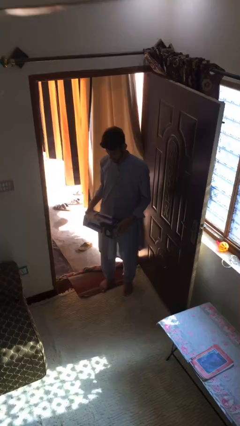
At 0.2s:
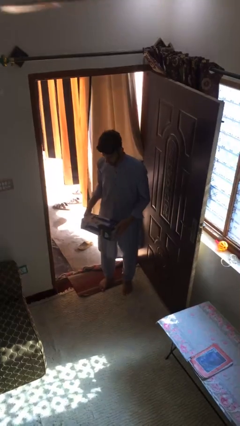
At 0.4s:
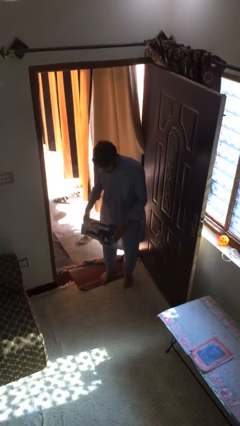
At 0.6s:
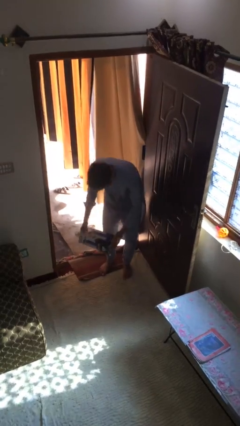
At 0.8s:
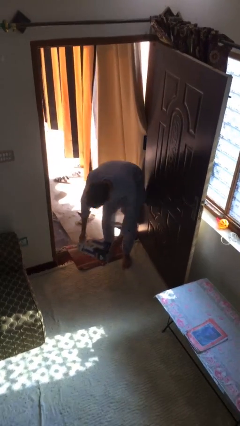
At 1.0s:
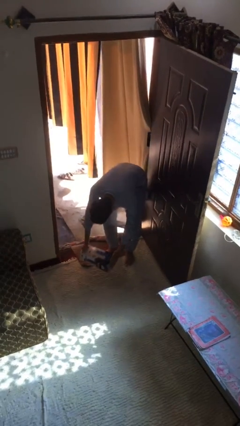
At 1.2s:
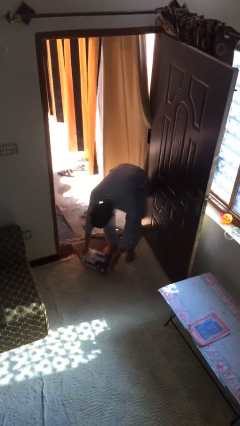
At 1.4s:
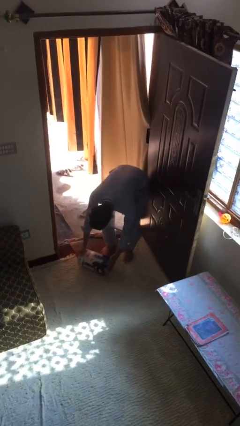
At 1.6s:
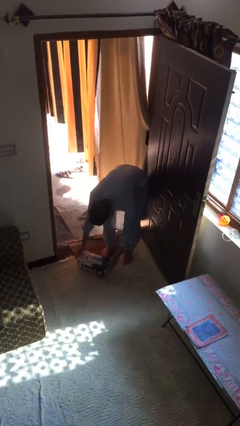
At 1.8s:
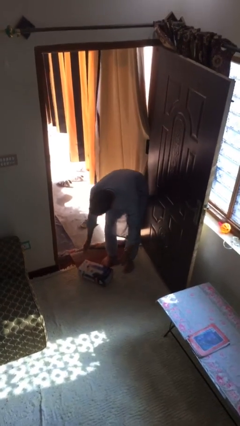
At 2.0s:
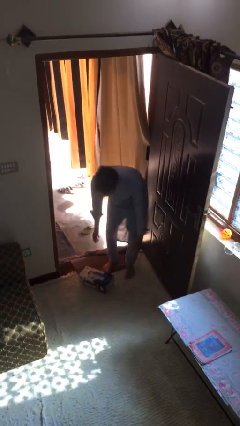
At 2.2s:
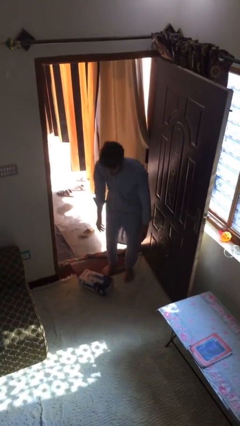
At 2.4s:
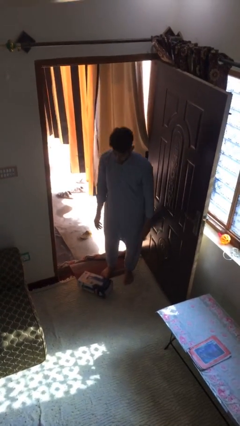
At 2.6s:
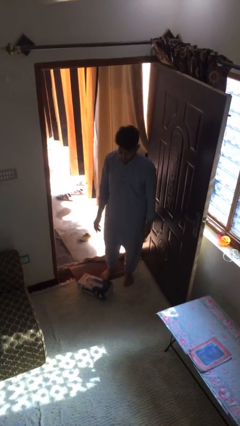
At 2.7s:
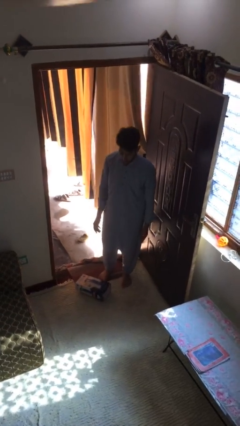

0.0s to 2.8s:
person puts down object on floor

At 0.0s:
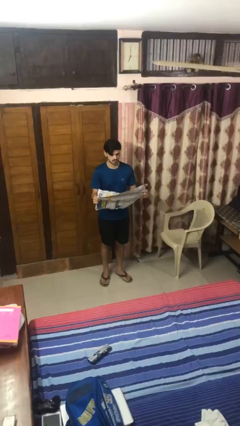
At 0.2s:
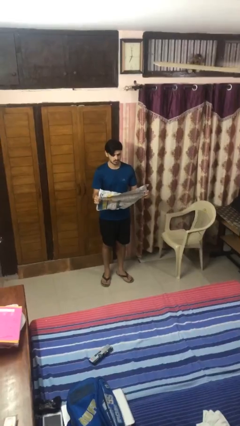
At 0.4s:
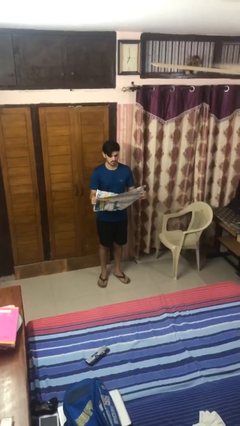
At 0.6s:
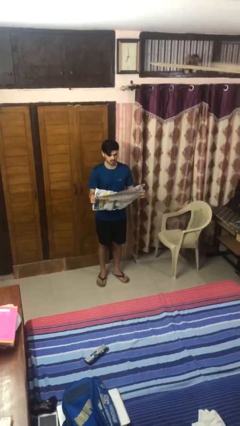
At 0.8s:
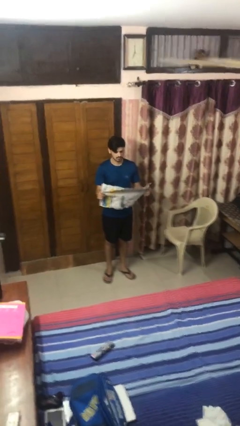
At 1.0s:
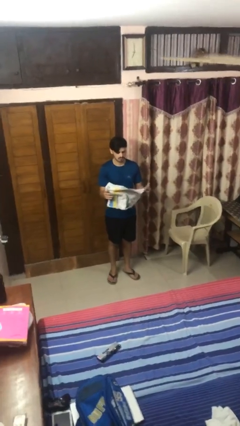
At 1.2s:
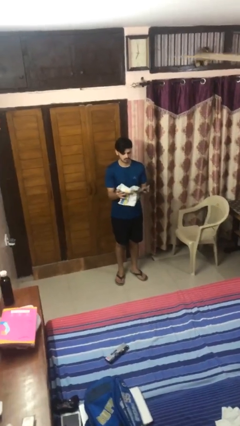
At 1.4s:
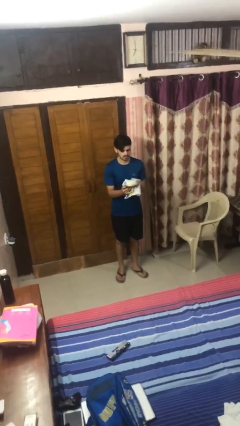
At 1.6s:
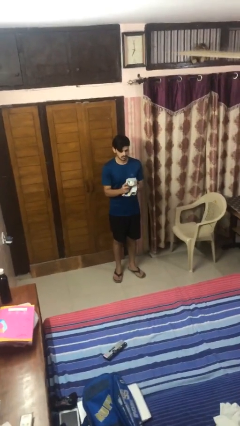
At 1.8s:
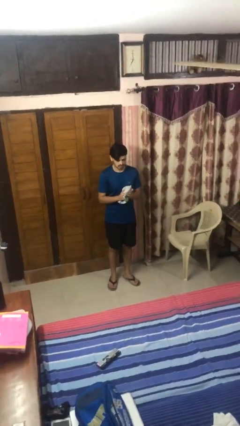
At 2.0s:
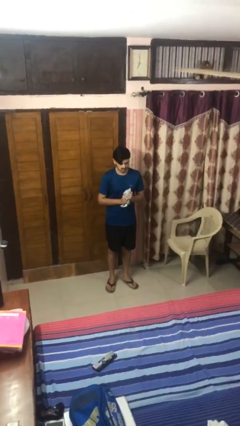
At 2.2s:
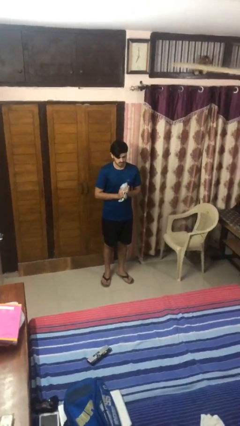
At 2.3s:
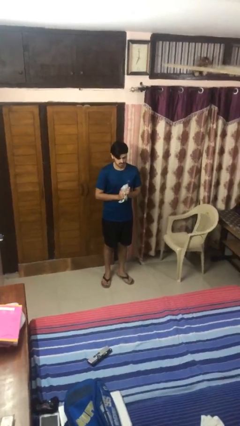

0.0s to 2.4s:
person crumples paper

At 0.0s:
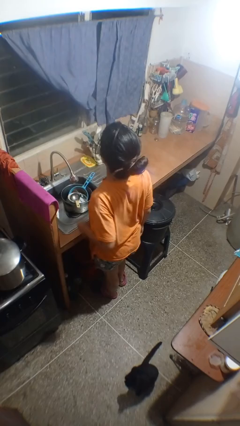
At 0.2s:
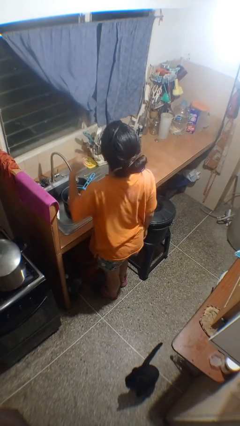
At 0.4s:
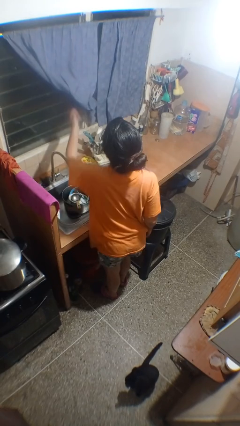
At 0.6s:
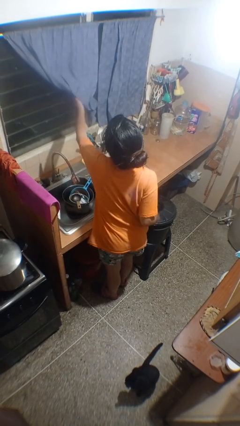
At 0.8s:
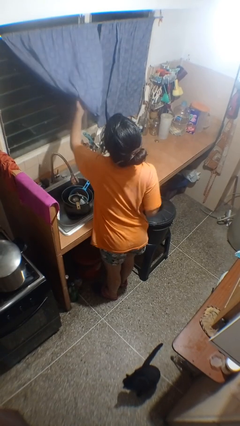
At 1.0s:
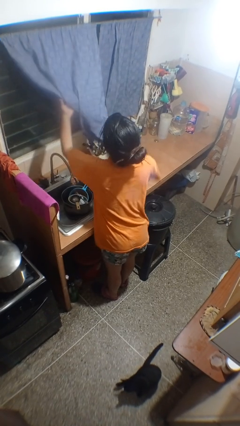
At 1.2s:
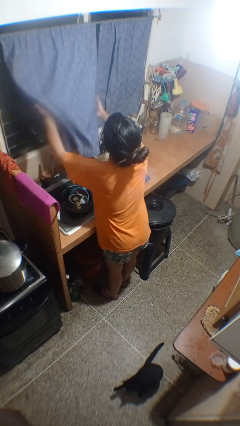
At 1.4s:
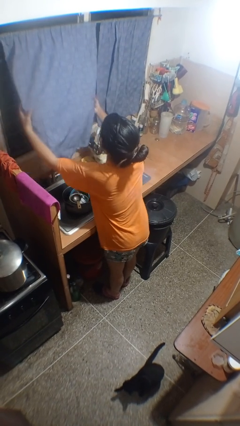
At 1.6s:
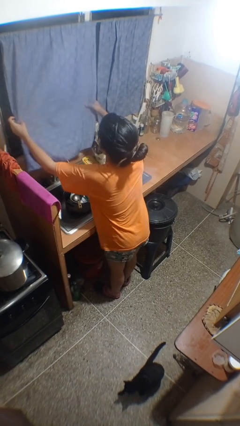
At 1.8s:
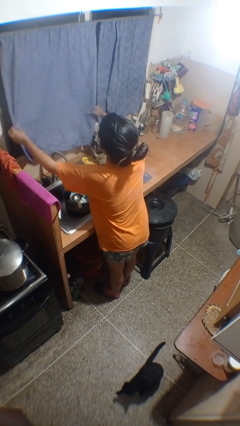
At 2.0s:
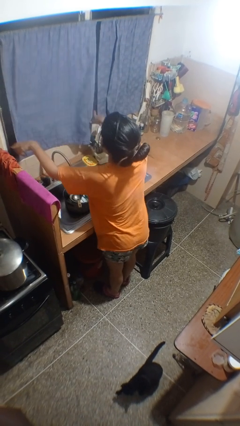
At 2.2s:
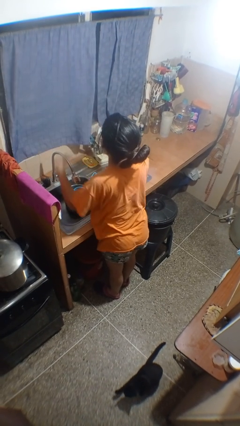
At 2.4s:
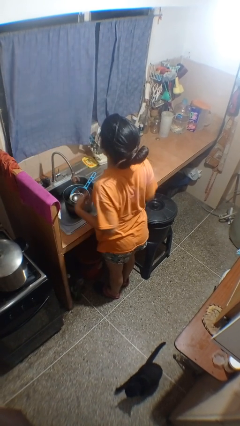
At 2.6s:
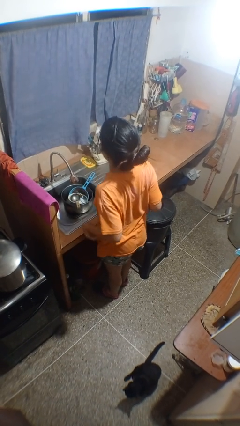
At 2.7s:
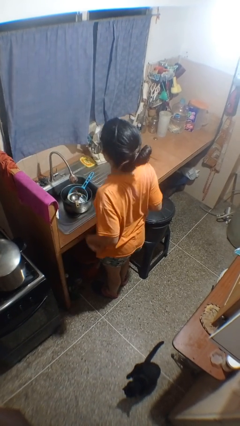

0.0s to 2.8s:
person closes curtains

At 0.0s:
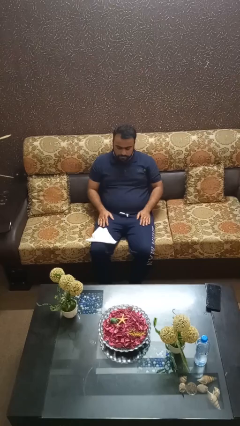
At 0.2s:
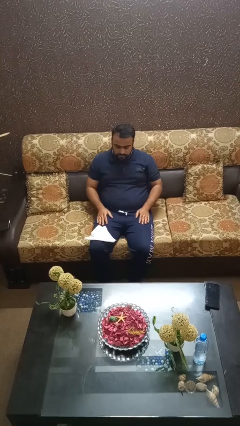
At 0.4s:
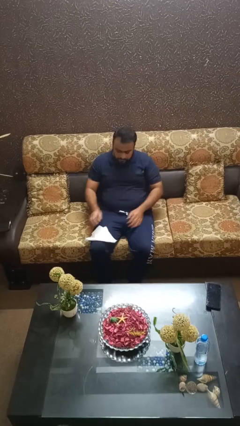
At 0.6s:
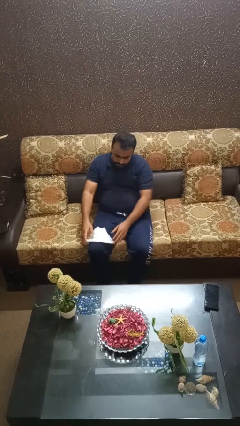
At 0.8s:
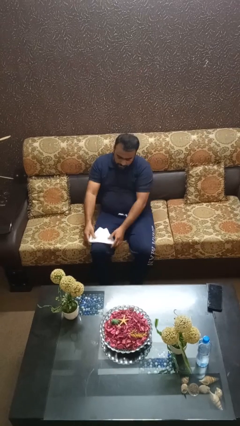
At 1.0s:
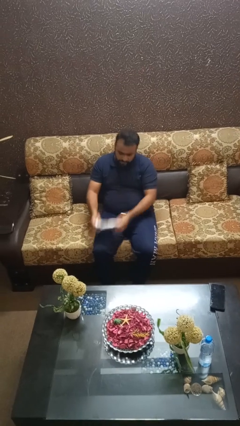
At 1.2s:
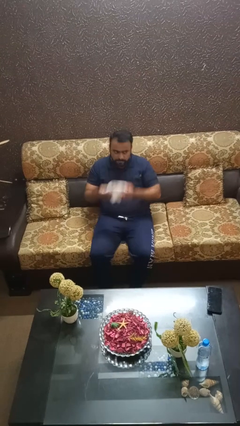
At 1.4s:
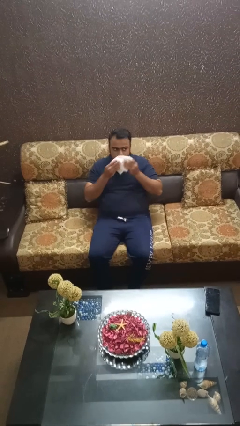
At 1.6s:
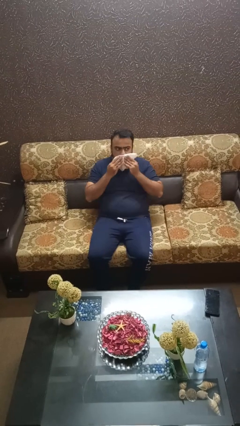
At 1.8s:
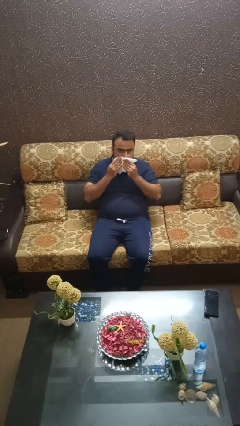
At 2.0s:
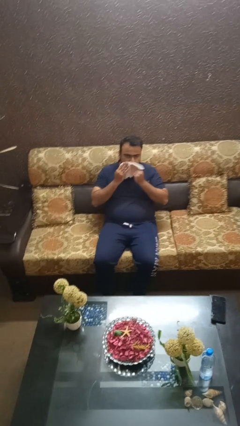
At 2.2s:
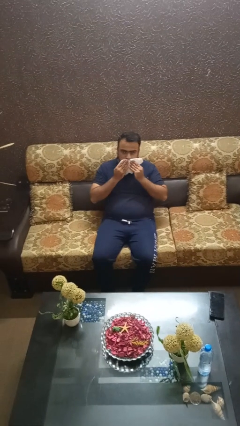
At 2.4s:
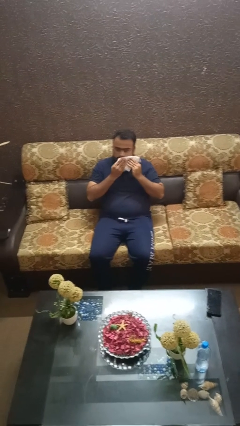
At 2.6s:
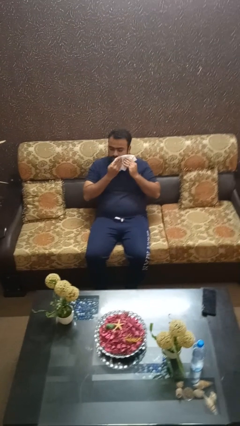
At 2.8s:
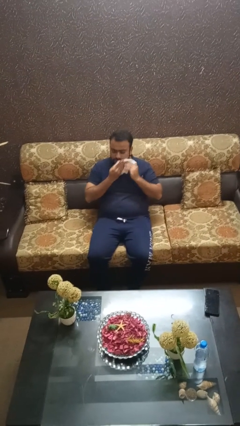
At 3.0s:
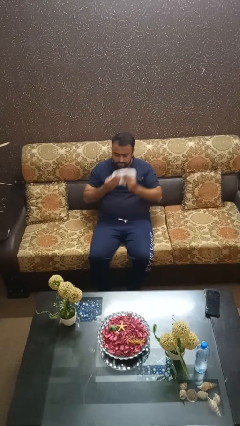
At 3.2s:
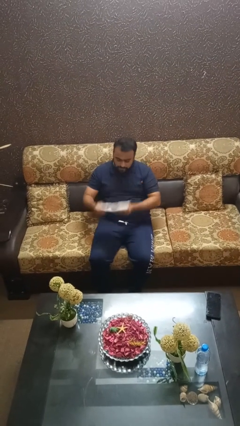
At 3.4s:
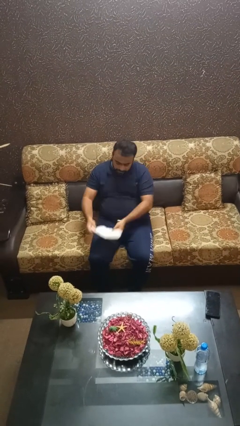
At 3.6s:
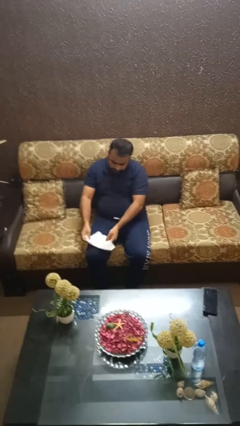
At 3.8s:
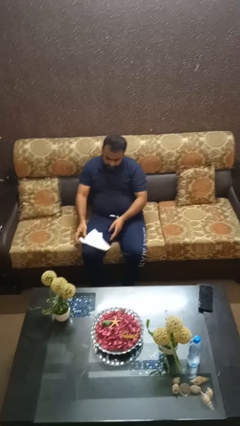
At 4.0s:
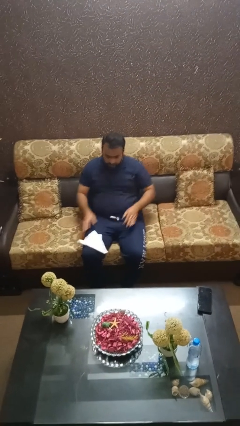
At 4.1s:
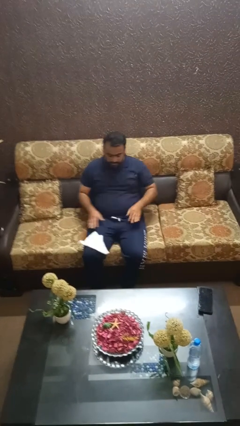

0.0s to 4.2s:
person wipes mouth with napkin

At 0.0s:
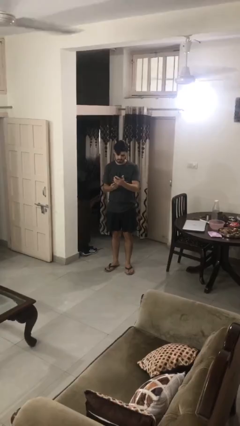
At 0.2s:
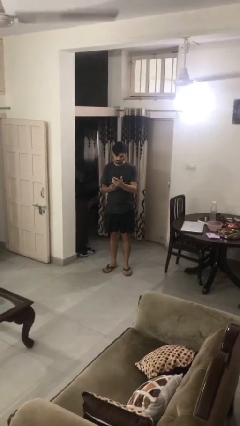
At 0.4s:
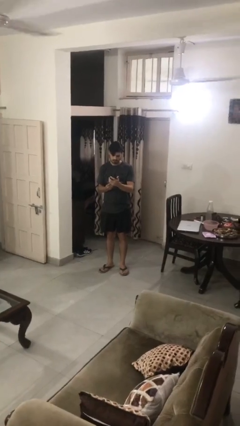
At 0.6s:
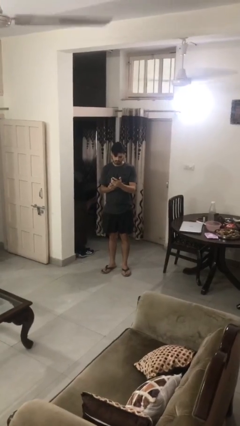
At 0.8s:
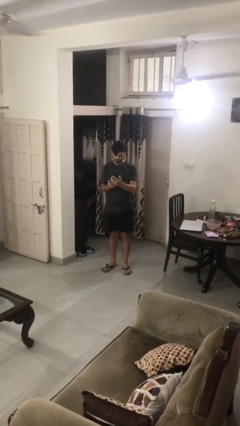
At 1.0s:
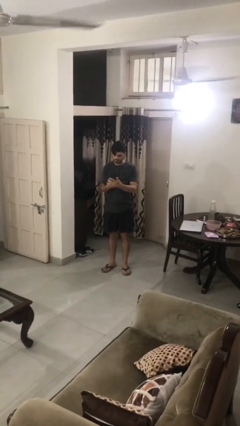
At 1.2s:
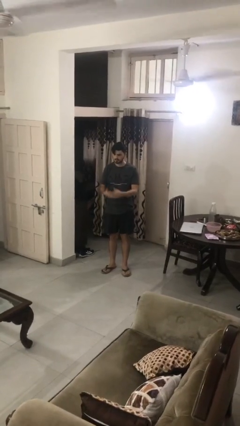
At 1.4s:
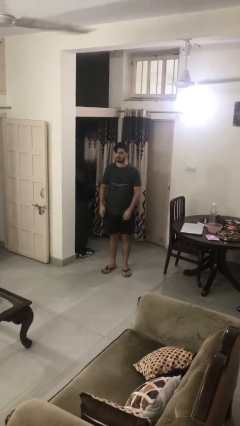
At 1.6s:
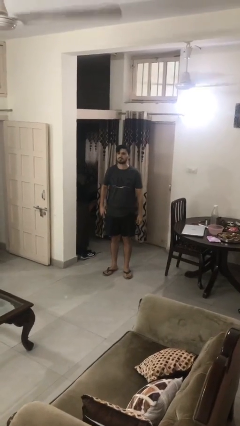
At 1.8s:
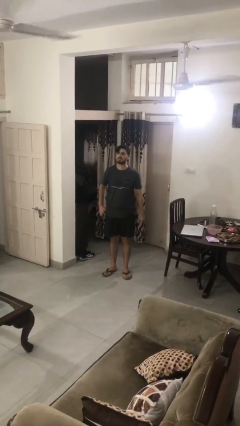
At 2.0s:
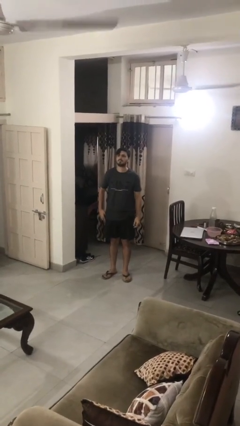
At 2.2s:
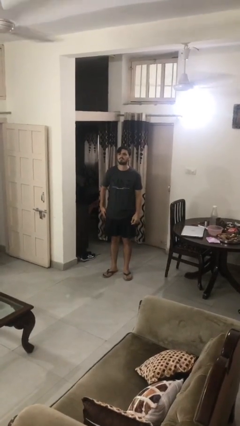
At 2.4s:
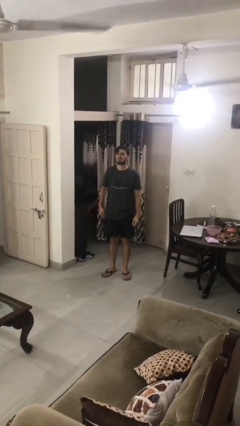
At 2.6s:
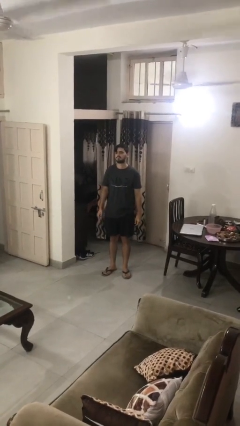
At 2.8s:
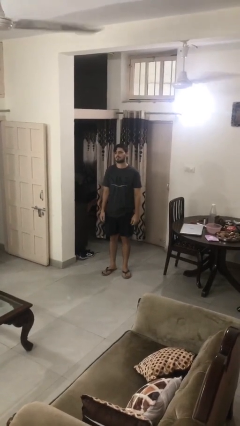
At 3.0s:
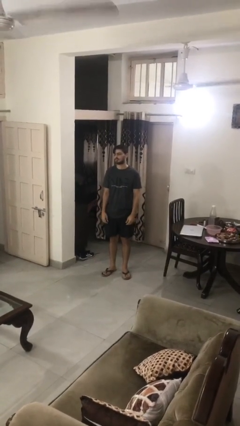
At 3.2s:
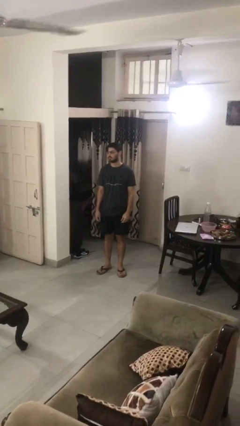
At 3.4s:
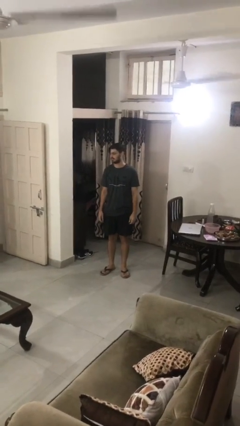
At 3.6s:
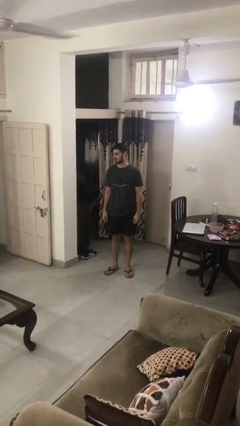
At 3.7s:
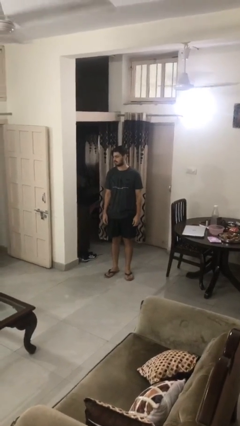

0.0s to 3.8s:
person puts phone into pocket

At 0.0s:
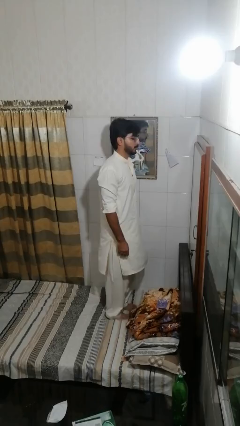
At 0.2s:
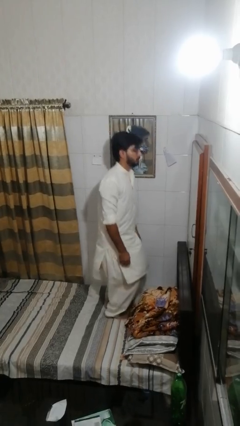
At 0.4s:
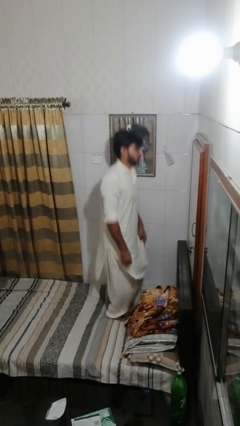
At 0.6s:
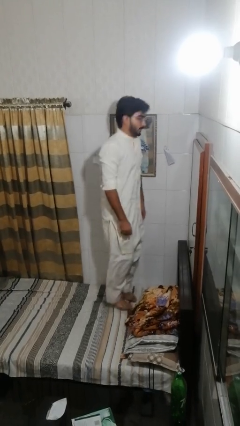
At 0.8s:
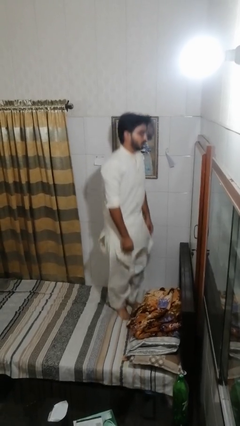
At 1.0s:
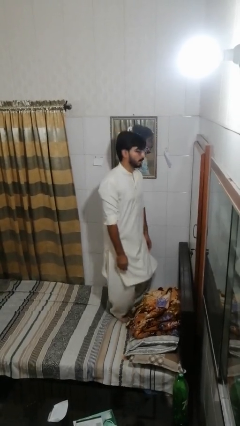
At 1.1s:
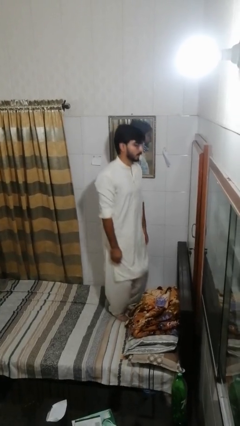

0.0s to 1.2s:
person jumps on bed

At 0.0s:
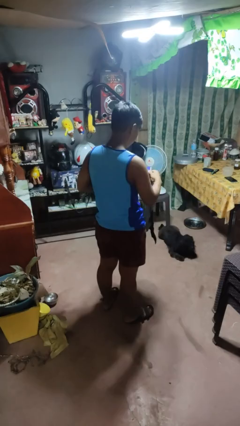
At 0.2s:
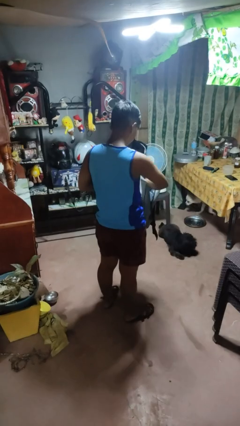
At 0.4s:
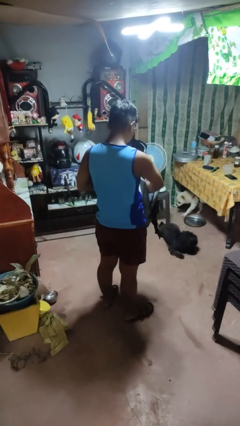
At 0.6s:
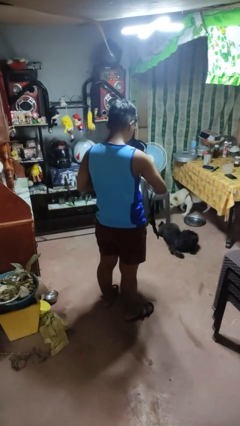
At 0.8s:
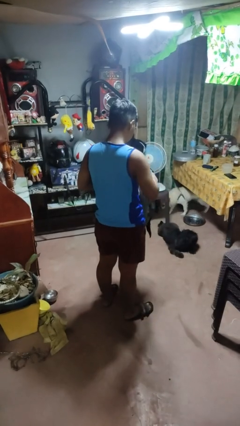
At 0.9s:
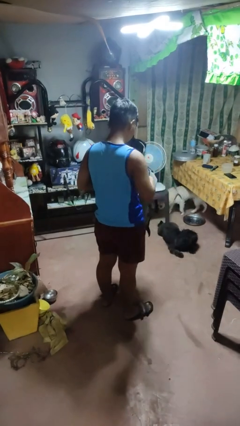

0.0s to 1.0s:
person puts object into bag
